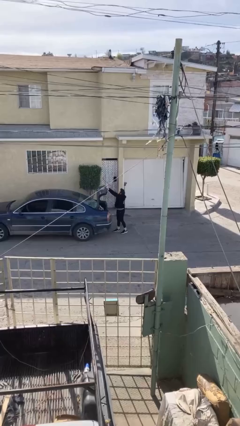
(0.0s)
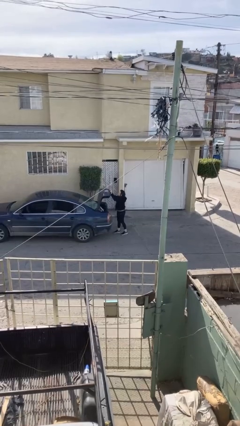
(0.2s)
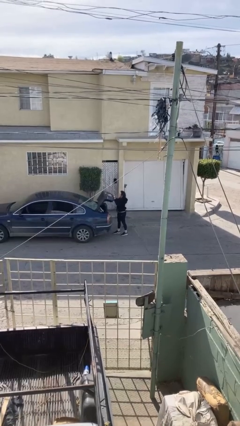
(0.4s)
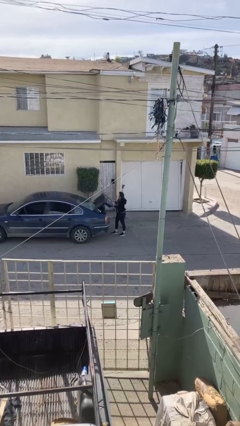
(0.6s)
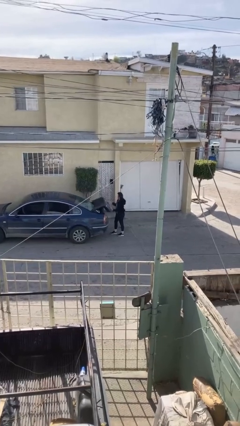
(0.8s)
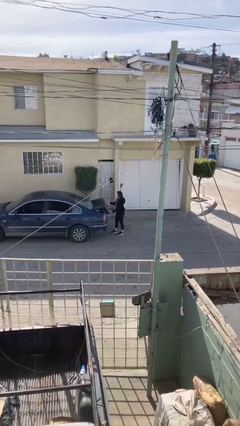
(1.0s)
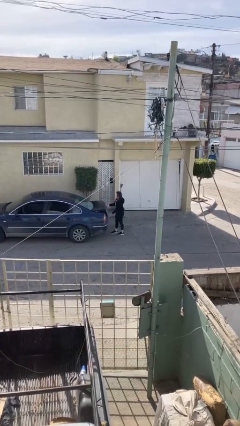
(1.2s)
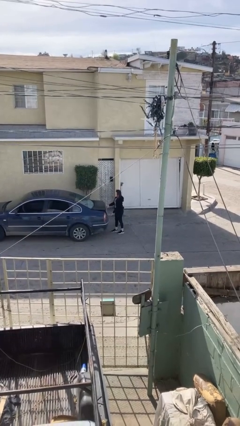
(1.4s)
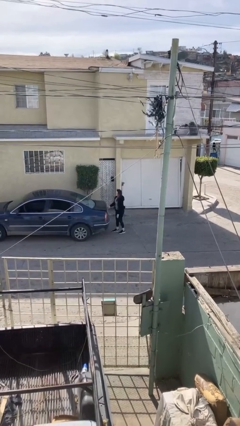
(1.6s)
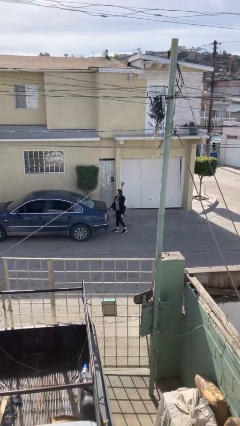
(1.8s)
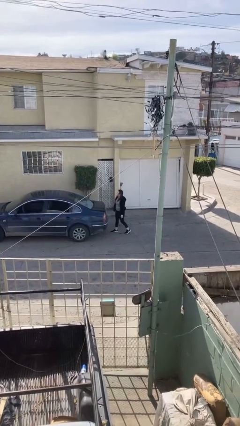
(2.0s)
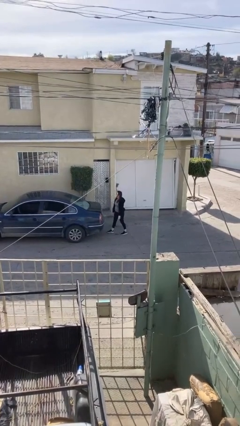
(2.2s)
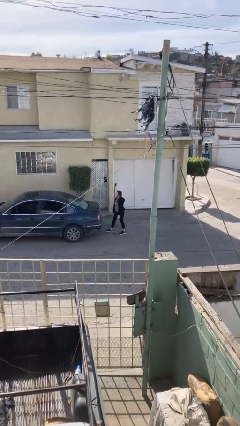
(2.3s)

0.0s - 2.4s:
person closes car trunk

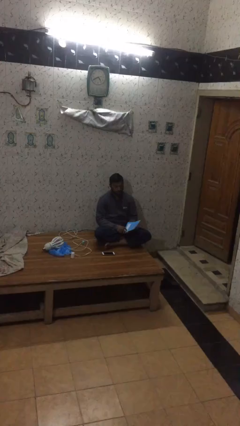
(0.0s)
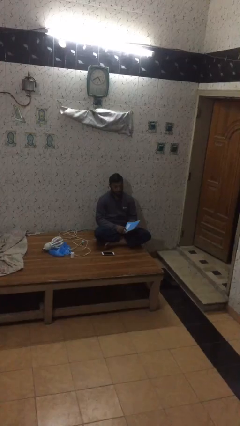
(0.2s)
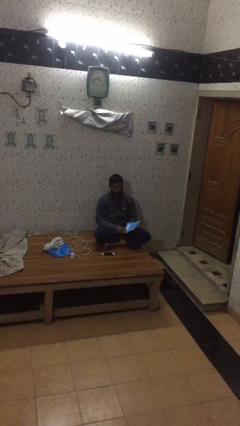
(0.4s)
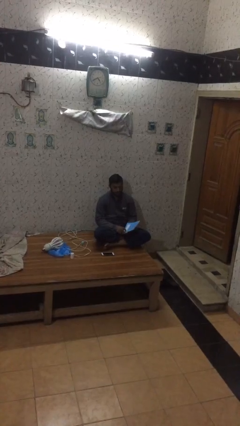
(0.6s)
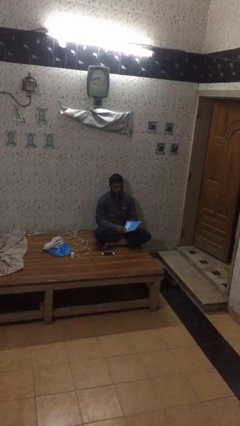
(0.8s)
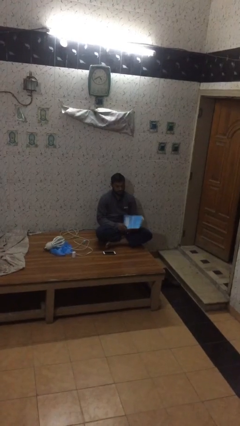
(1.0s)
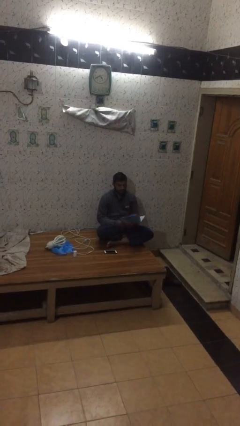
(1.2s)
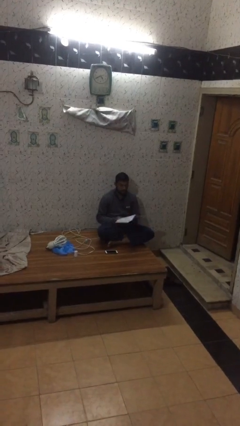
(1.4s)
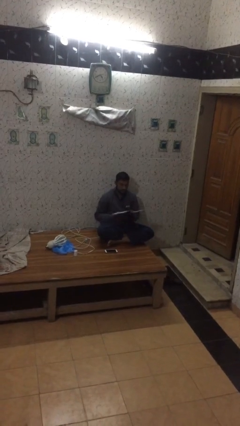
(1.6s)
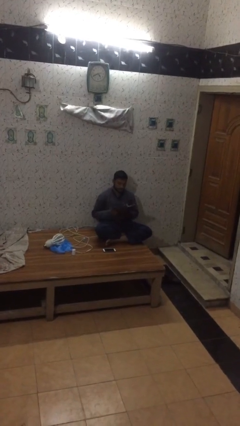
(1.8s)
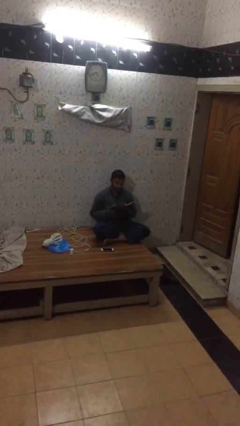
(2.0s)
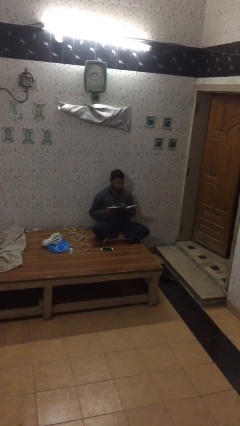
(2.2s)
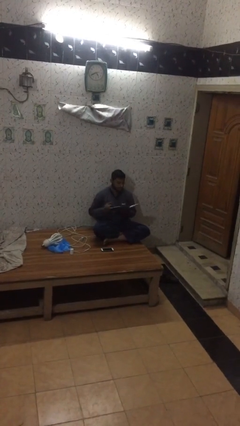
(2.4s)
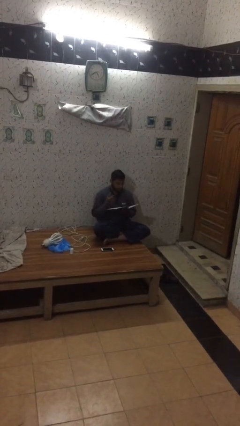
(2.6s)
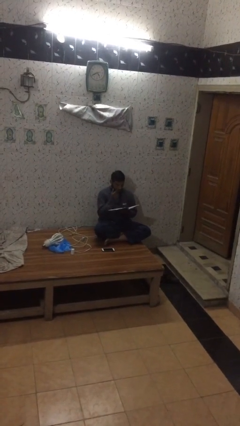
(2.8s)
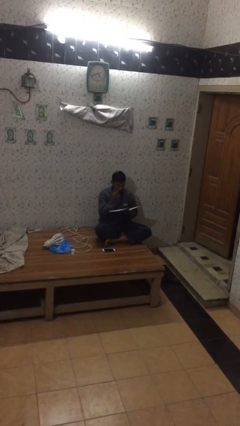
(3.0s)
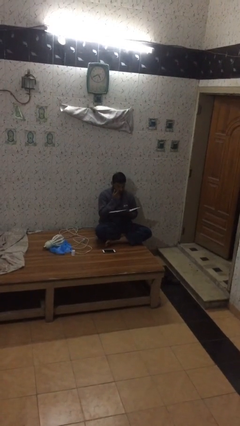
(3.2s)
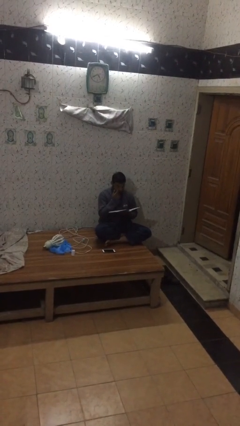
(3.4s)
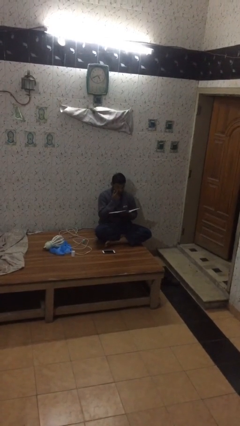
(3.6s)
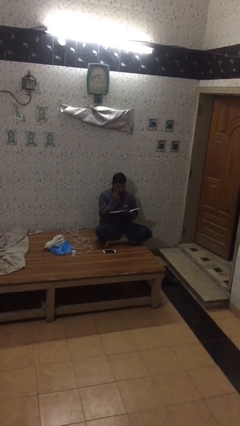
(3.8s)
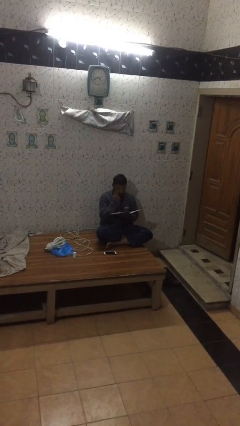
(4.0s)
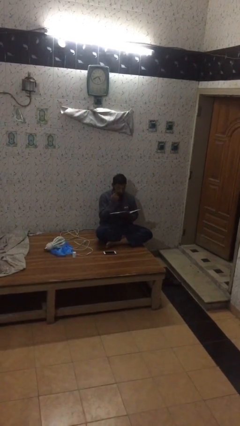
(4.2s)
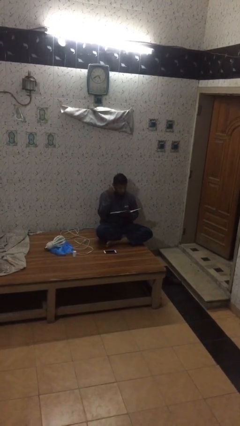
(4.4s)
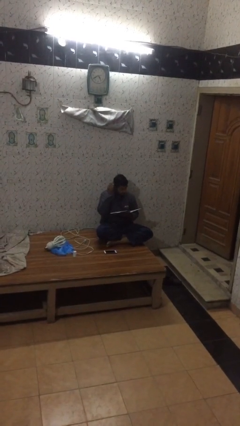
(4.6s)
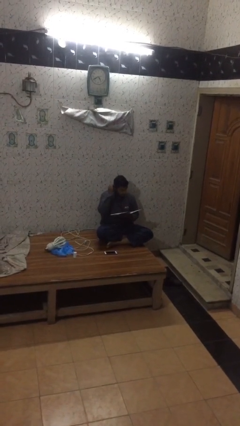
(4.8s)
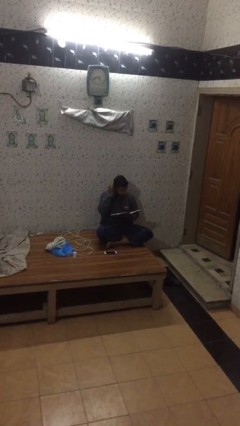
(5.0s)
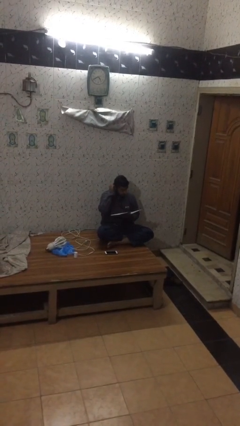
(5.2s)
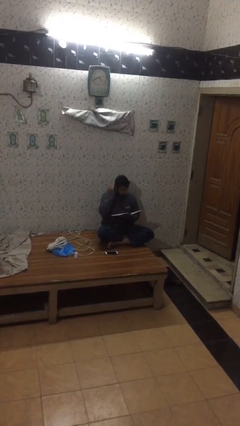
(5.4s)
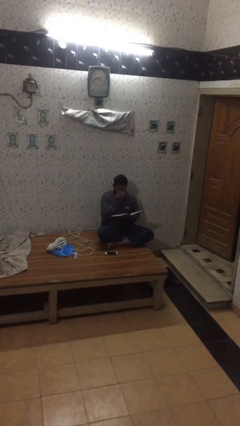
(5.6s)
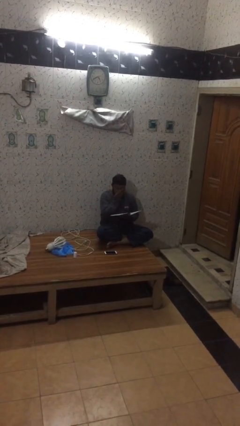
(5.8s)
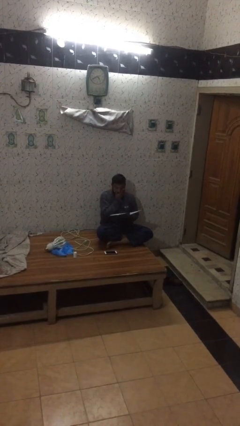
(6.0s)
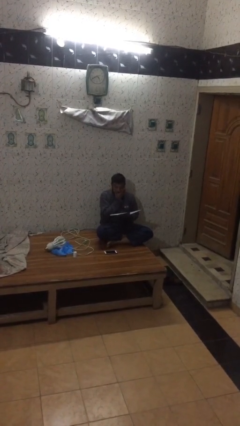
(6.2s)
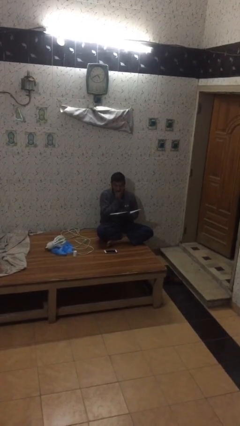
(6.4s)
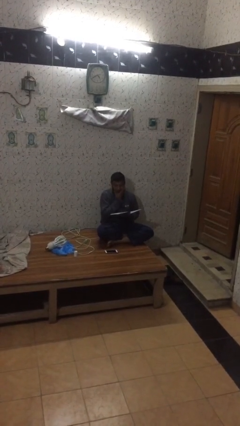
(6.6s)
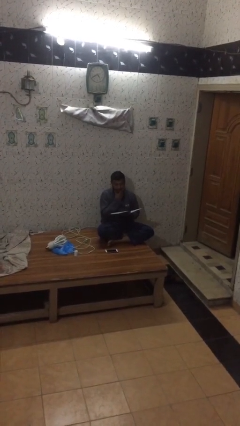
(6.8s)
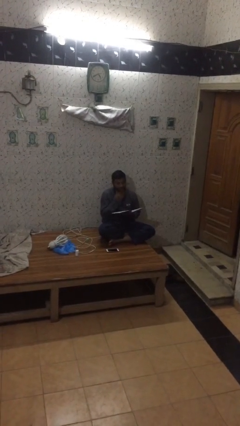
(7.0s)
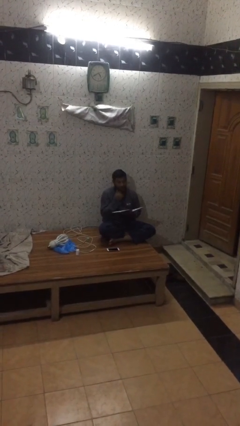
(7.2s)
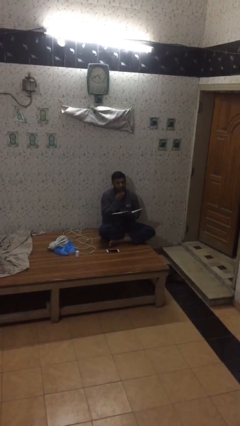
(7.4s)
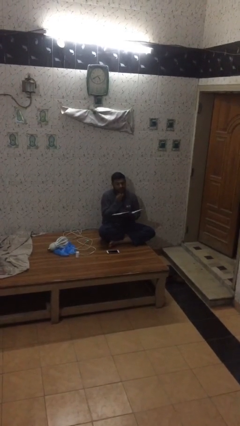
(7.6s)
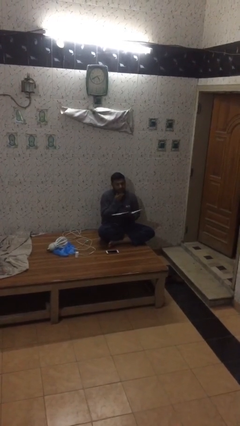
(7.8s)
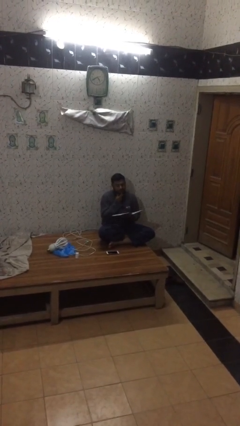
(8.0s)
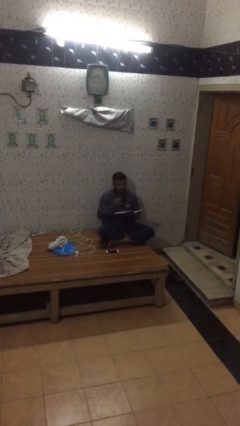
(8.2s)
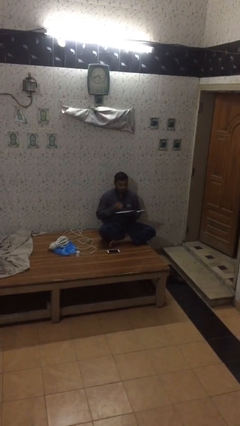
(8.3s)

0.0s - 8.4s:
person reads document

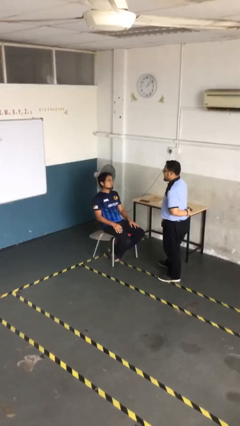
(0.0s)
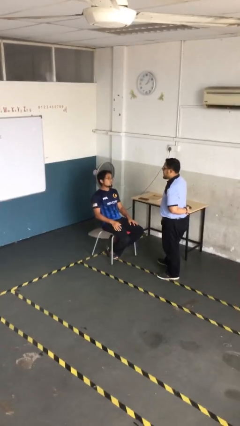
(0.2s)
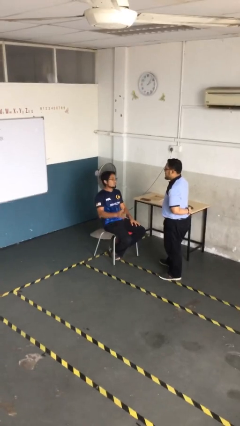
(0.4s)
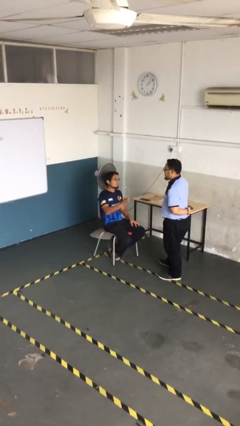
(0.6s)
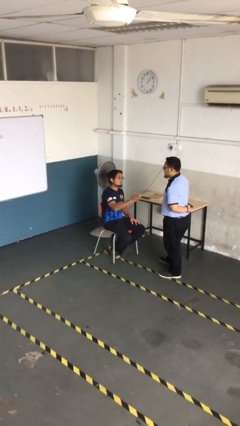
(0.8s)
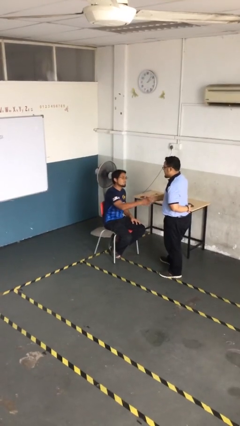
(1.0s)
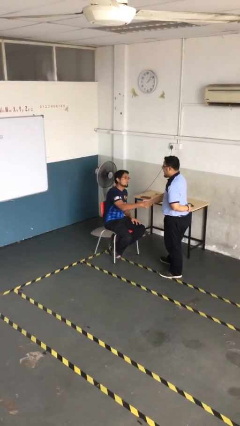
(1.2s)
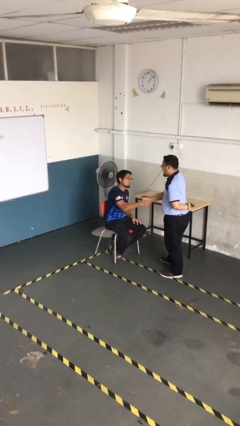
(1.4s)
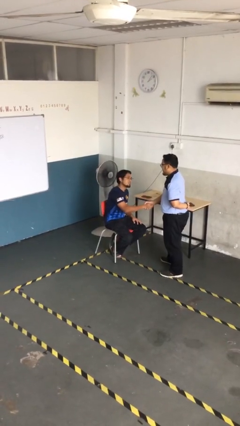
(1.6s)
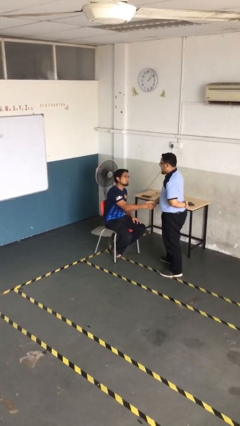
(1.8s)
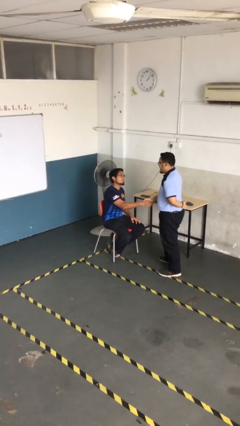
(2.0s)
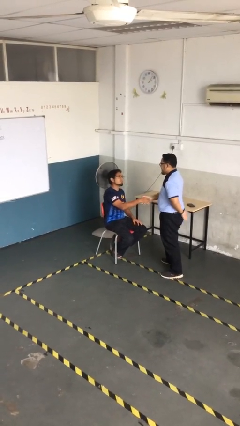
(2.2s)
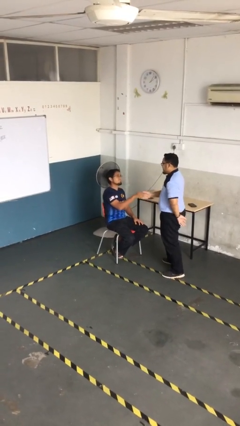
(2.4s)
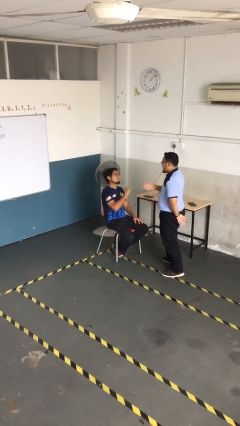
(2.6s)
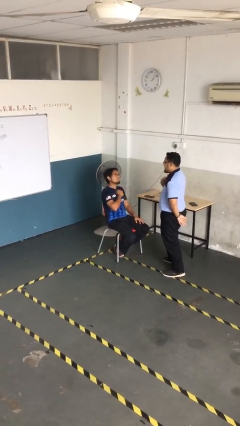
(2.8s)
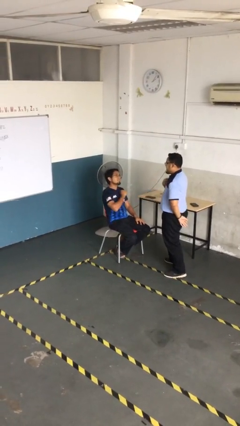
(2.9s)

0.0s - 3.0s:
person shakes hand

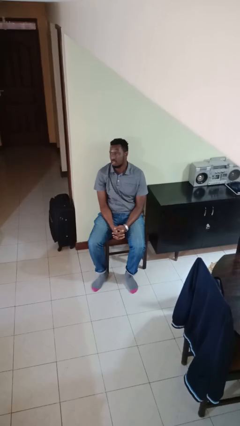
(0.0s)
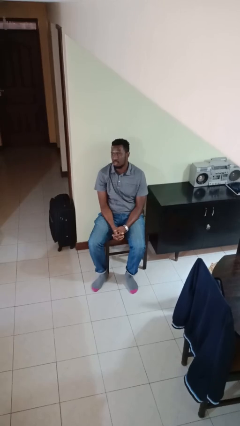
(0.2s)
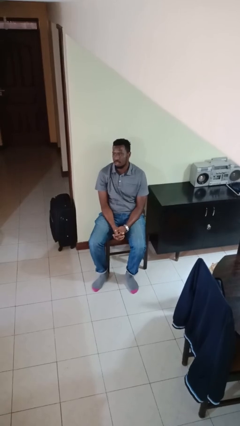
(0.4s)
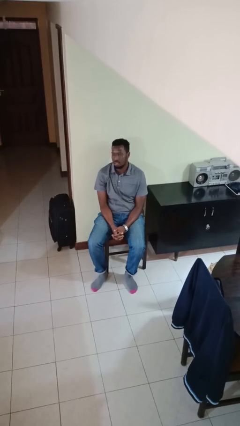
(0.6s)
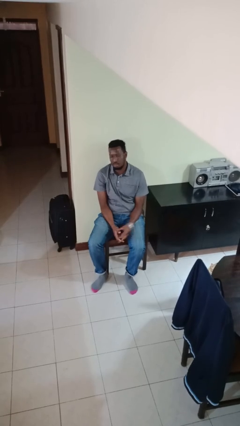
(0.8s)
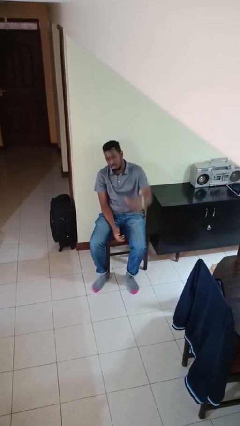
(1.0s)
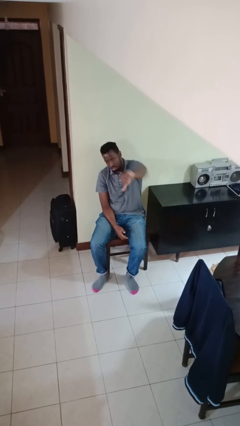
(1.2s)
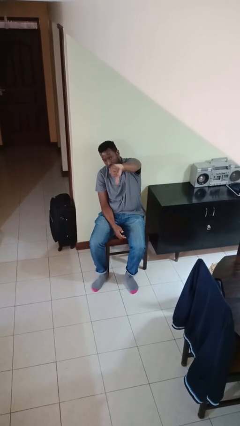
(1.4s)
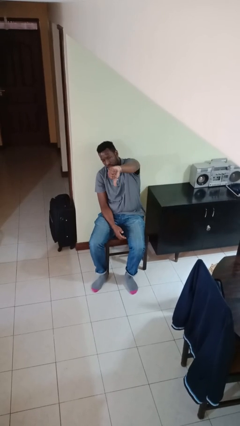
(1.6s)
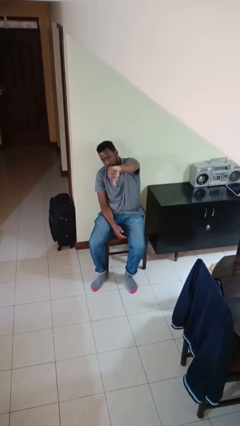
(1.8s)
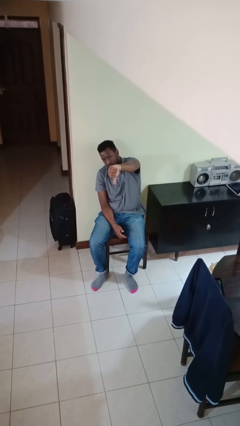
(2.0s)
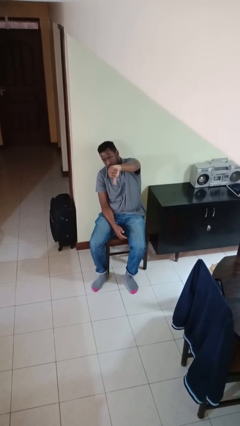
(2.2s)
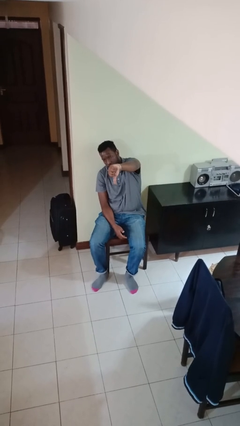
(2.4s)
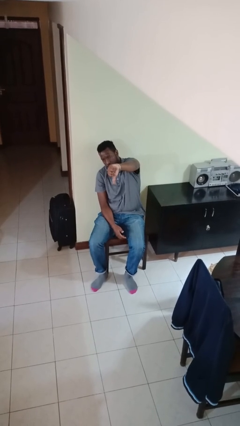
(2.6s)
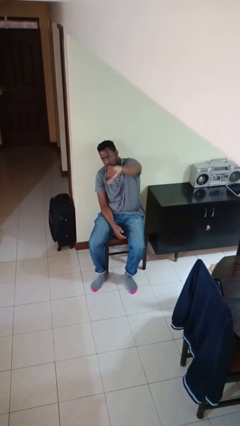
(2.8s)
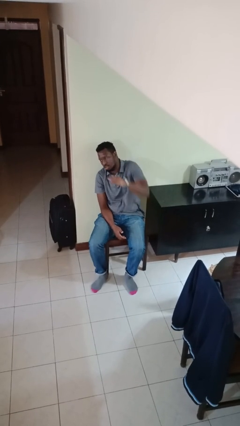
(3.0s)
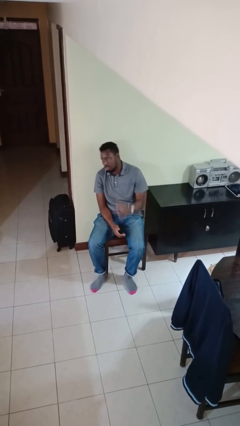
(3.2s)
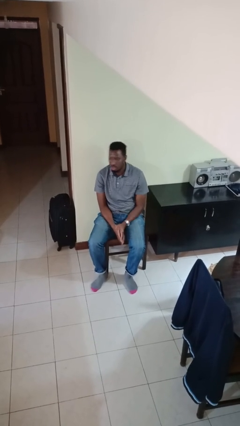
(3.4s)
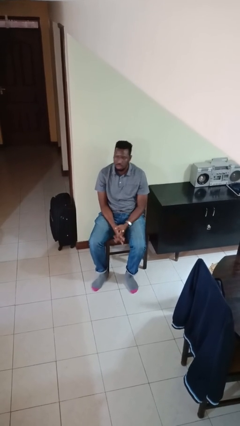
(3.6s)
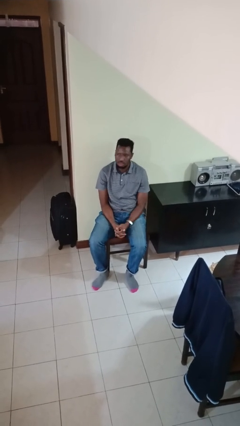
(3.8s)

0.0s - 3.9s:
person gestures thumbs down
